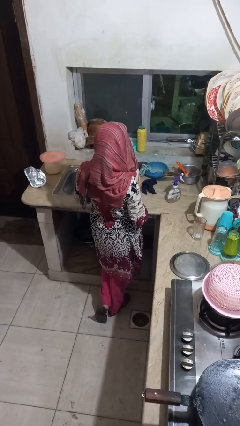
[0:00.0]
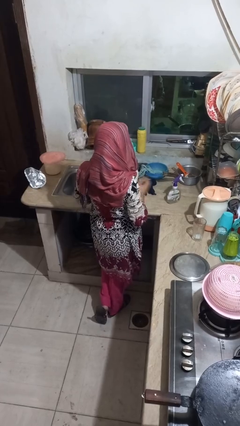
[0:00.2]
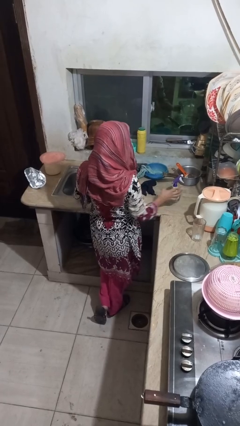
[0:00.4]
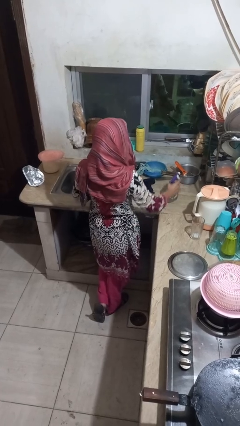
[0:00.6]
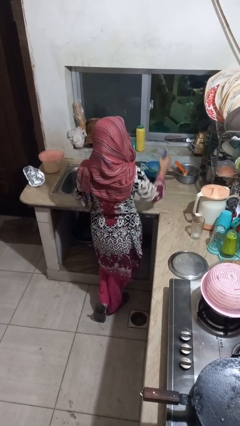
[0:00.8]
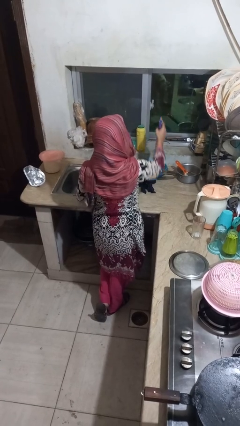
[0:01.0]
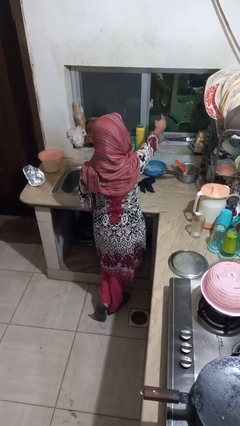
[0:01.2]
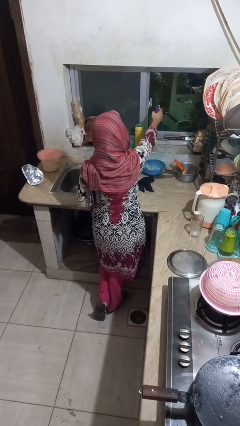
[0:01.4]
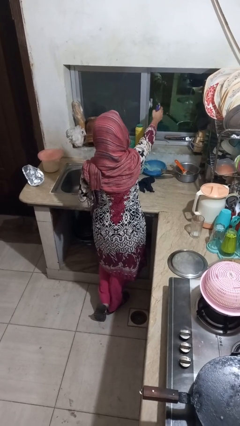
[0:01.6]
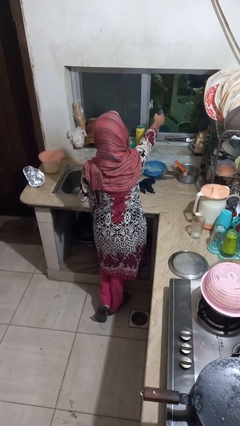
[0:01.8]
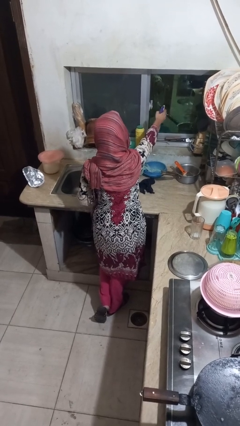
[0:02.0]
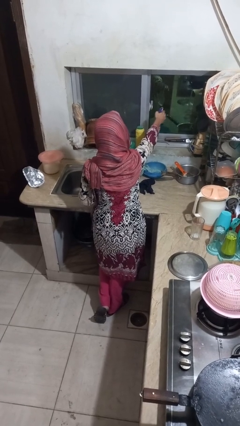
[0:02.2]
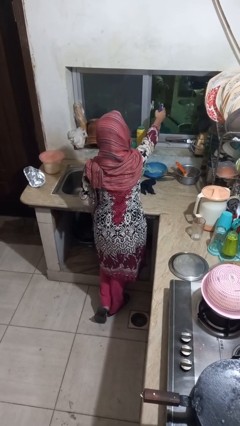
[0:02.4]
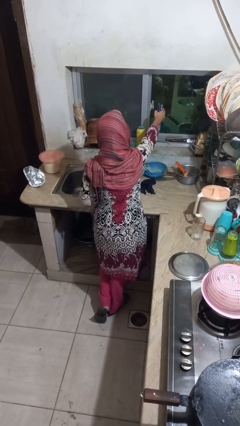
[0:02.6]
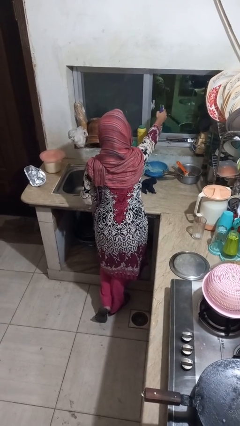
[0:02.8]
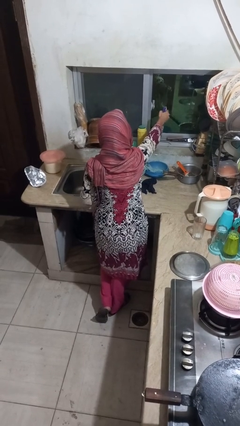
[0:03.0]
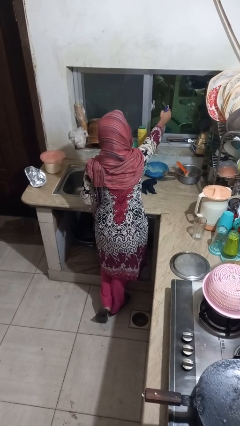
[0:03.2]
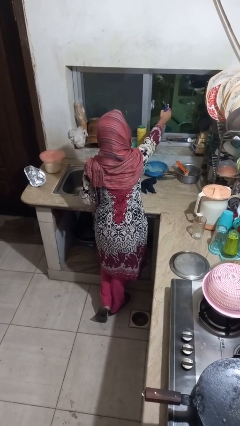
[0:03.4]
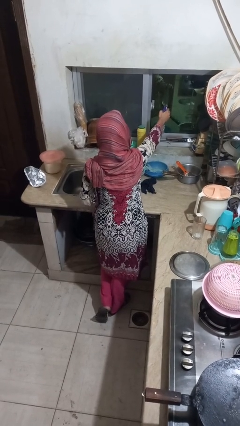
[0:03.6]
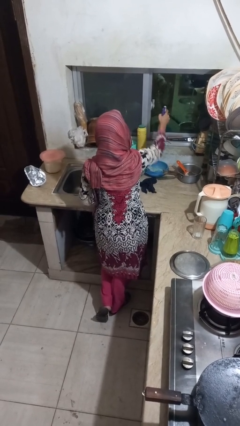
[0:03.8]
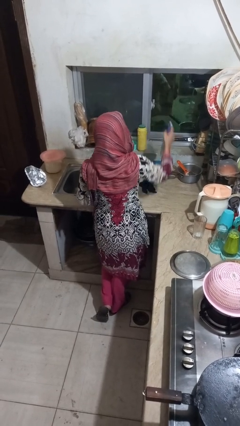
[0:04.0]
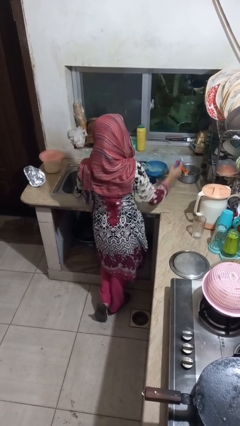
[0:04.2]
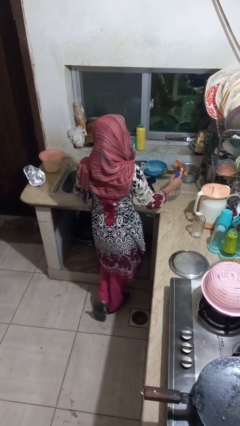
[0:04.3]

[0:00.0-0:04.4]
person sprays from bottle

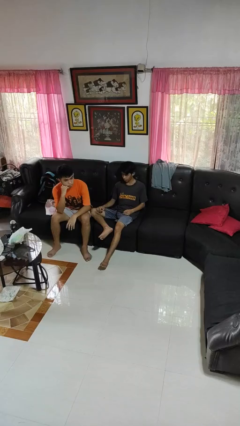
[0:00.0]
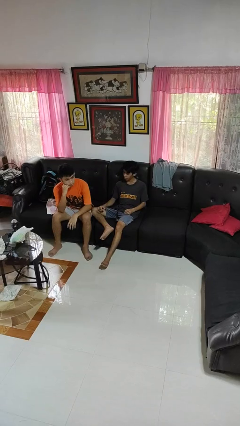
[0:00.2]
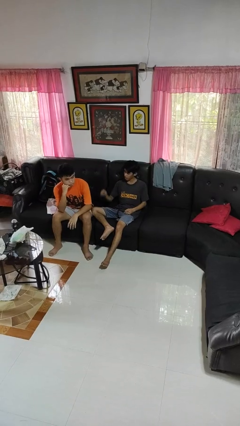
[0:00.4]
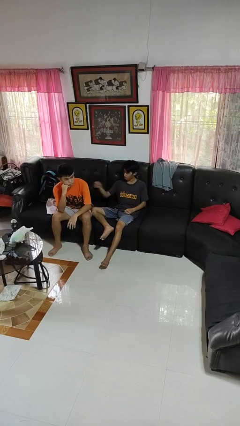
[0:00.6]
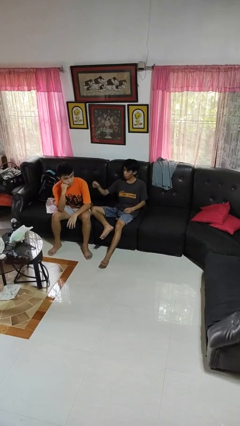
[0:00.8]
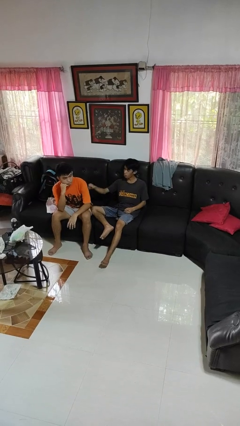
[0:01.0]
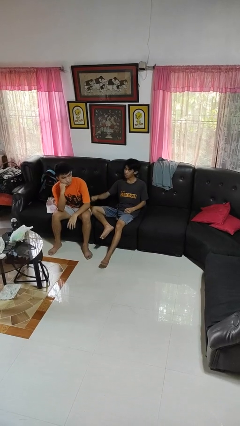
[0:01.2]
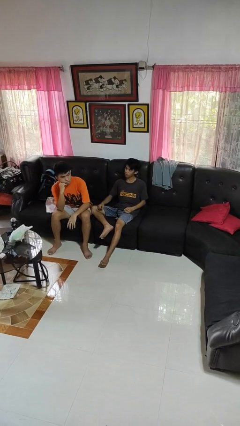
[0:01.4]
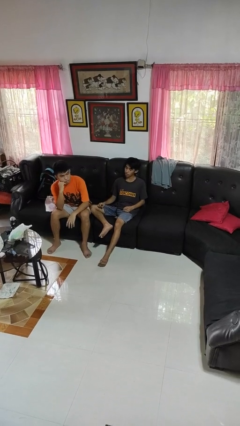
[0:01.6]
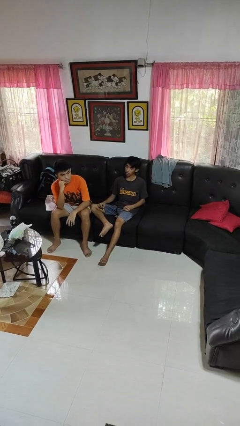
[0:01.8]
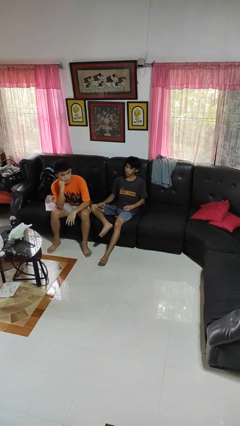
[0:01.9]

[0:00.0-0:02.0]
person pounds shoulders of person

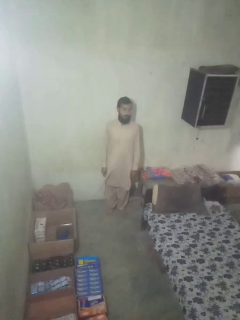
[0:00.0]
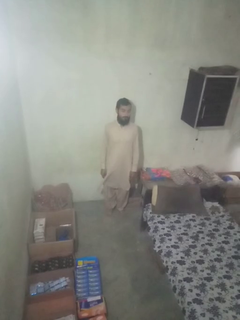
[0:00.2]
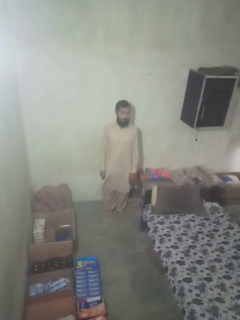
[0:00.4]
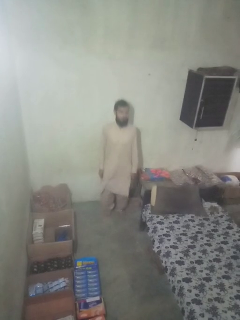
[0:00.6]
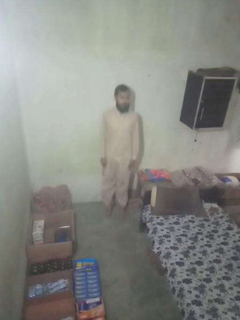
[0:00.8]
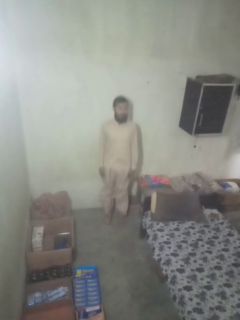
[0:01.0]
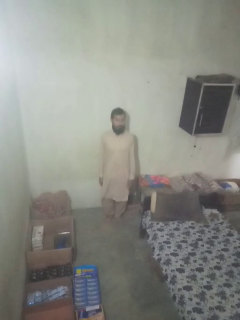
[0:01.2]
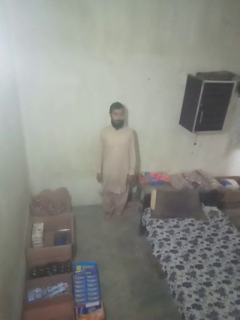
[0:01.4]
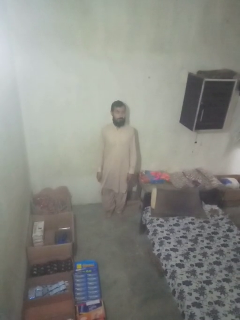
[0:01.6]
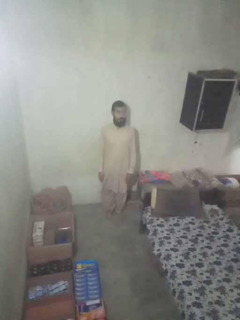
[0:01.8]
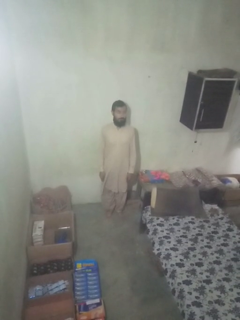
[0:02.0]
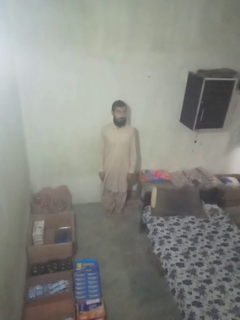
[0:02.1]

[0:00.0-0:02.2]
person jumps

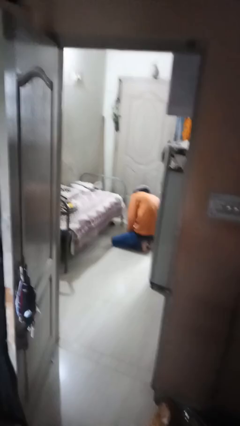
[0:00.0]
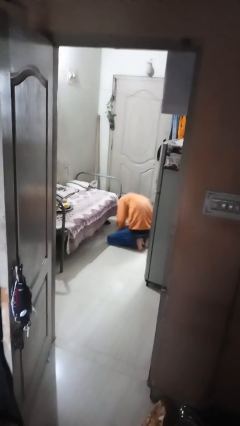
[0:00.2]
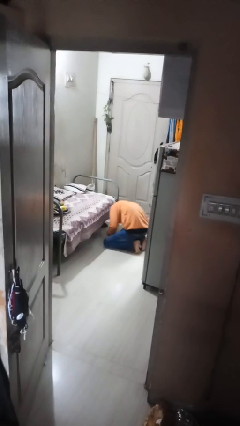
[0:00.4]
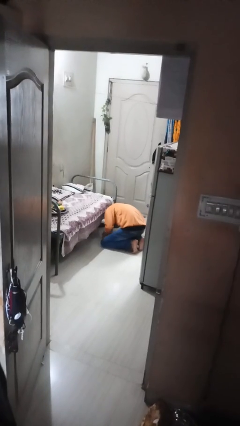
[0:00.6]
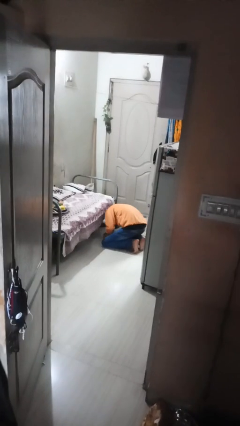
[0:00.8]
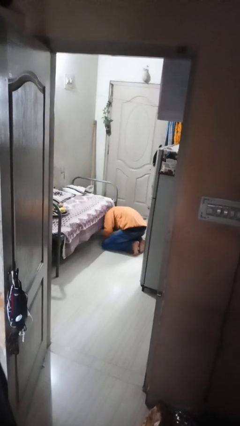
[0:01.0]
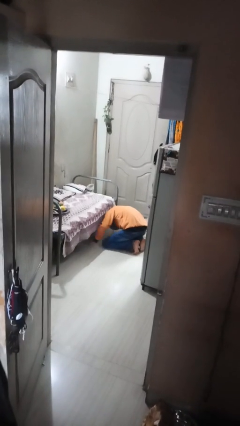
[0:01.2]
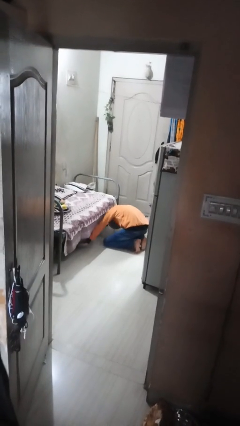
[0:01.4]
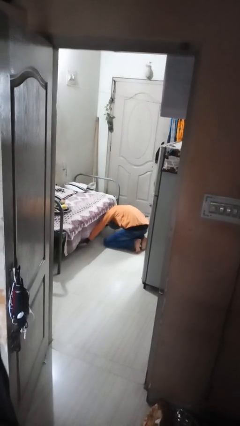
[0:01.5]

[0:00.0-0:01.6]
person searches under bed

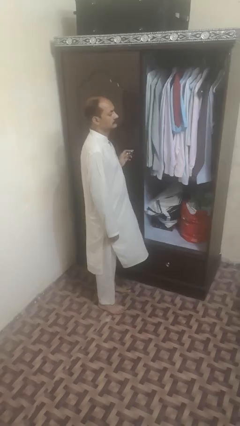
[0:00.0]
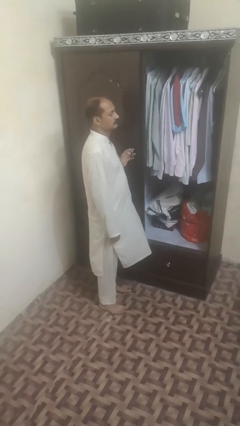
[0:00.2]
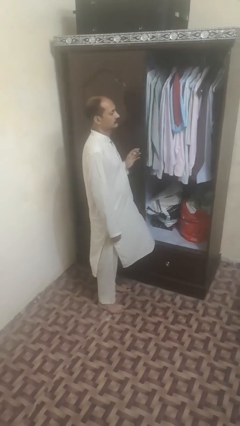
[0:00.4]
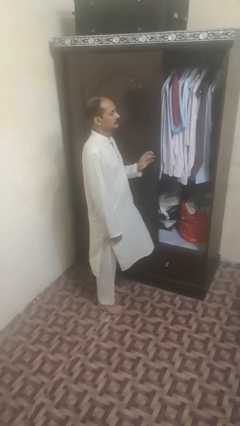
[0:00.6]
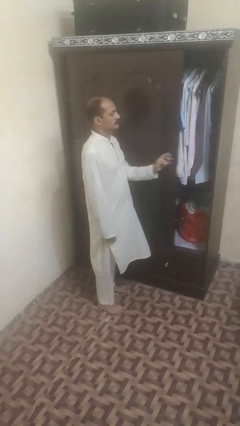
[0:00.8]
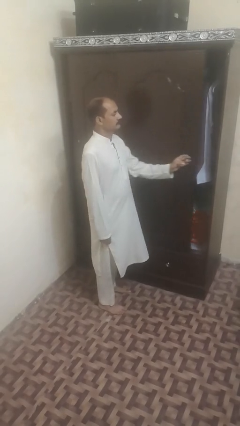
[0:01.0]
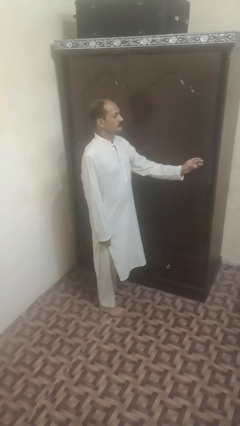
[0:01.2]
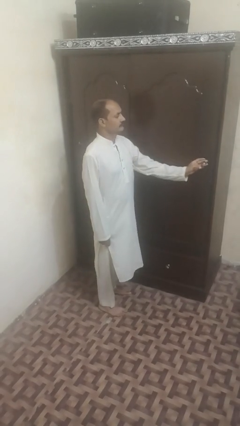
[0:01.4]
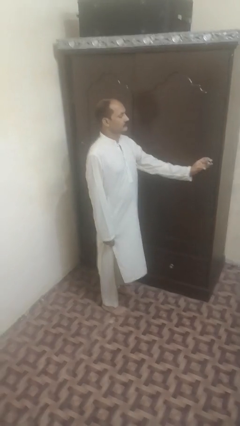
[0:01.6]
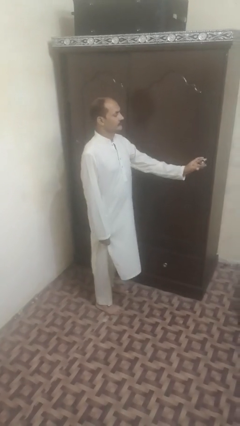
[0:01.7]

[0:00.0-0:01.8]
person closes sliding door

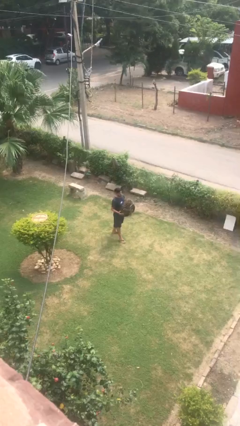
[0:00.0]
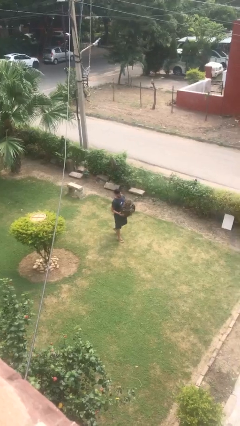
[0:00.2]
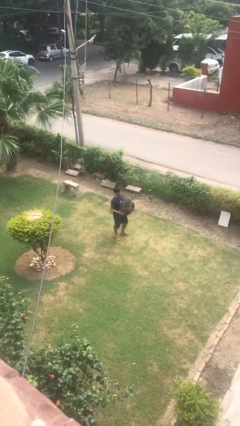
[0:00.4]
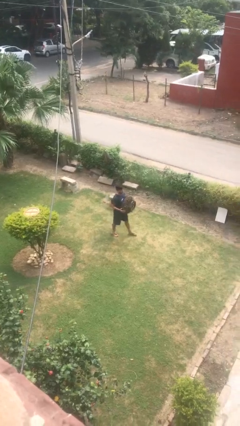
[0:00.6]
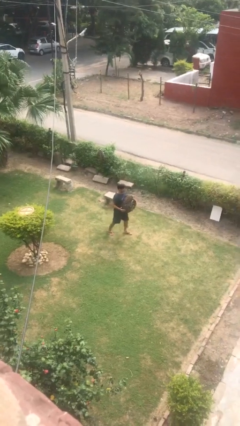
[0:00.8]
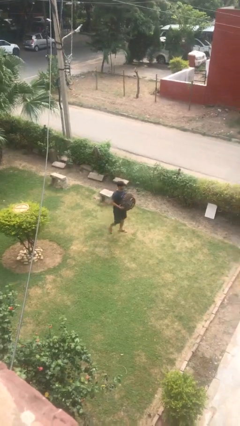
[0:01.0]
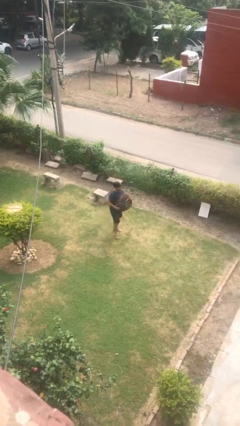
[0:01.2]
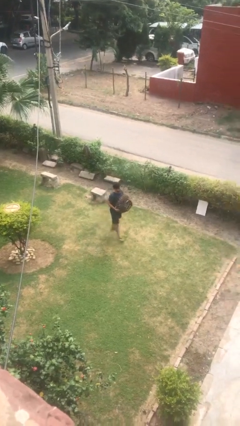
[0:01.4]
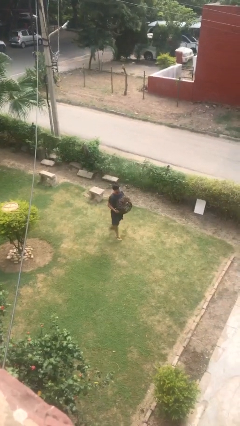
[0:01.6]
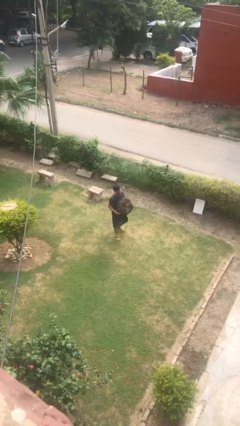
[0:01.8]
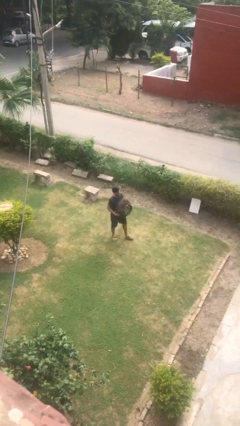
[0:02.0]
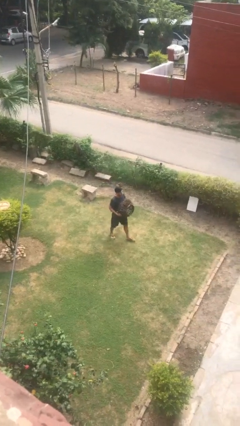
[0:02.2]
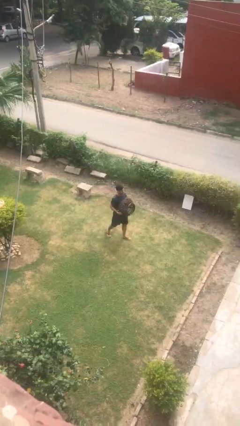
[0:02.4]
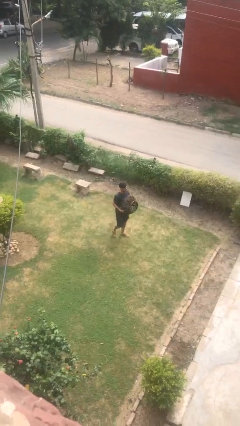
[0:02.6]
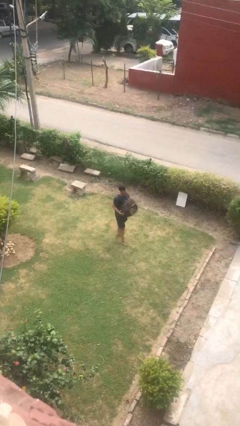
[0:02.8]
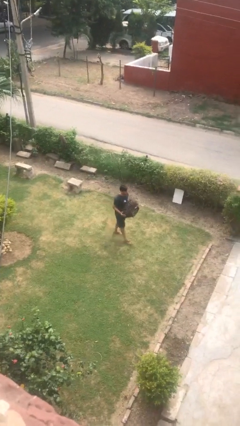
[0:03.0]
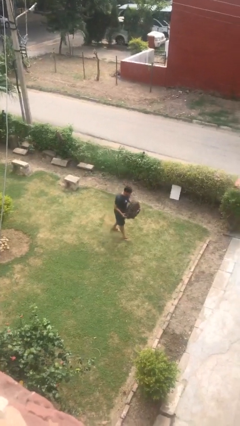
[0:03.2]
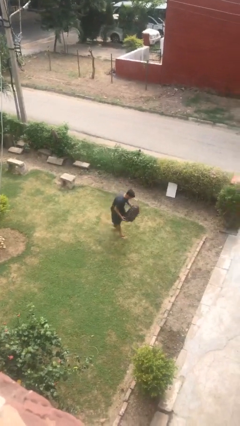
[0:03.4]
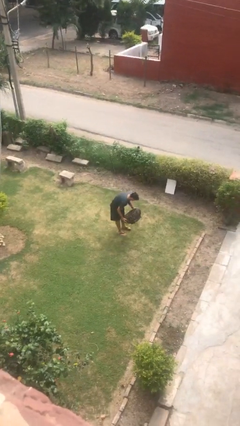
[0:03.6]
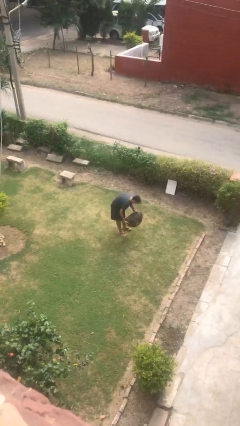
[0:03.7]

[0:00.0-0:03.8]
person carries heavy object

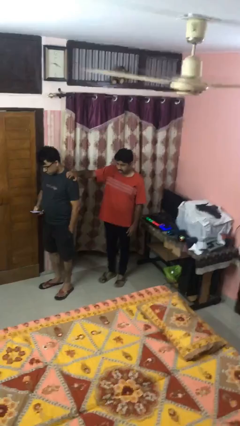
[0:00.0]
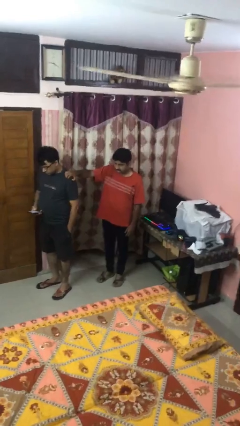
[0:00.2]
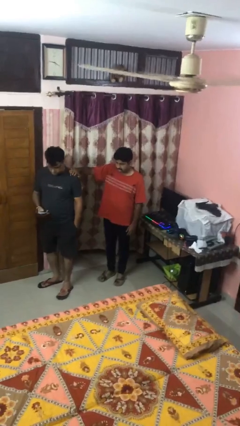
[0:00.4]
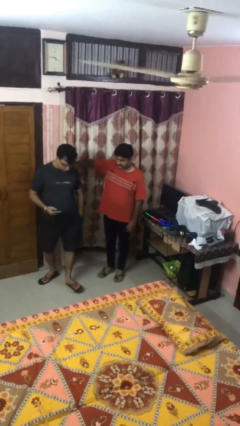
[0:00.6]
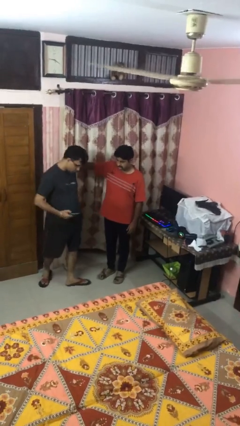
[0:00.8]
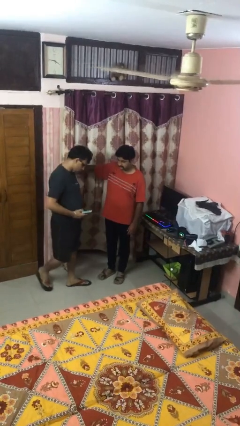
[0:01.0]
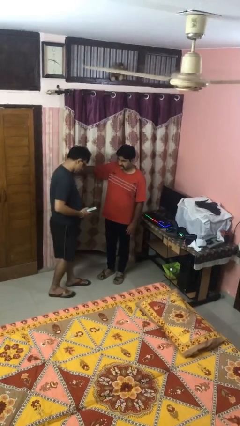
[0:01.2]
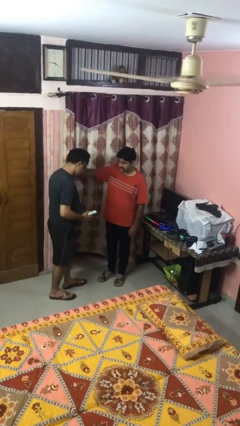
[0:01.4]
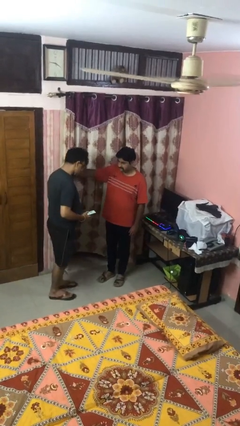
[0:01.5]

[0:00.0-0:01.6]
person spins person around

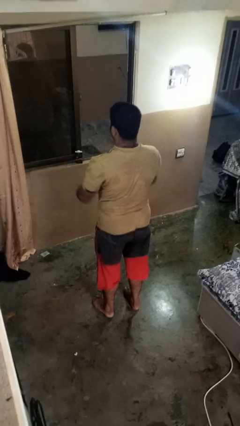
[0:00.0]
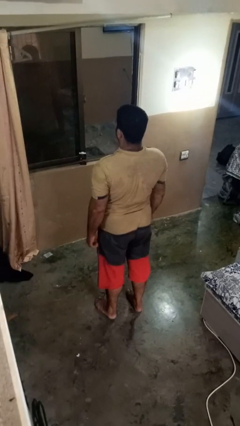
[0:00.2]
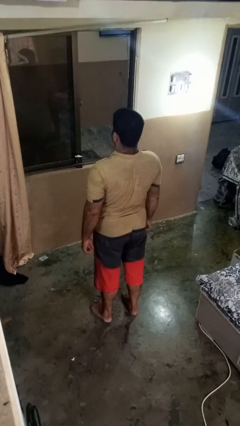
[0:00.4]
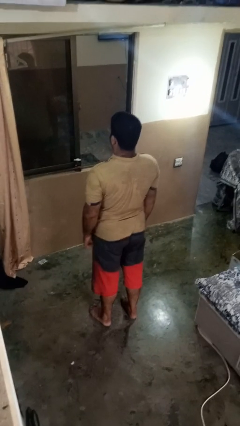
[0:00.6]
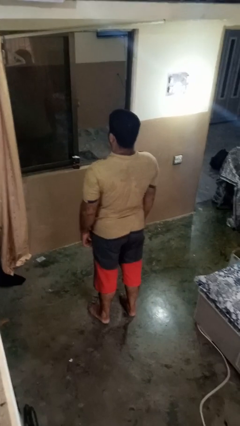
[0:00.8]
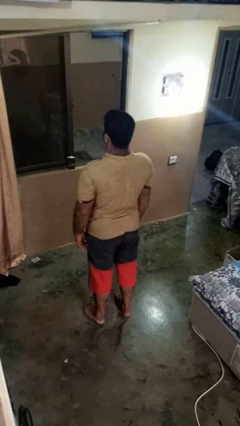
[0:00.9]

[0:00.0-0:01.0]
person stands up
